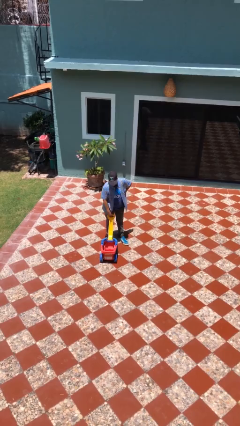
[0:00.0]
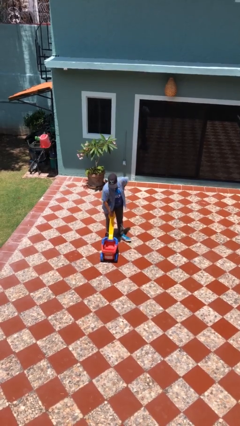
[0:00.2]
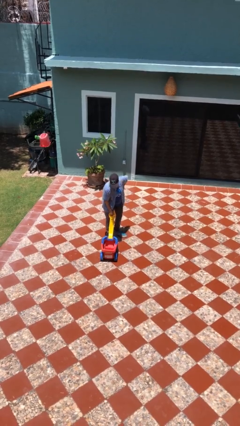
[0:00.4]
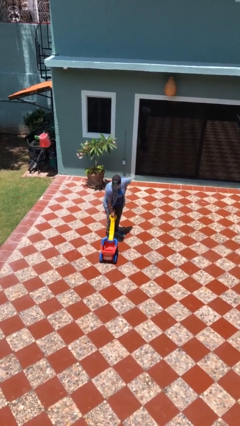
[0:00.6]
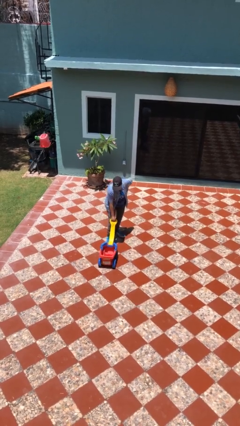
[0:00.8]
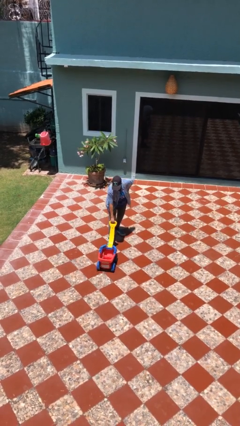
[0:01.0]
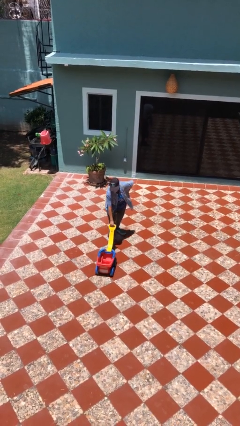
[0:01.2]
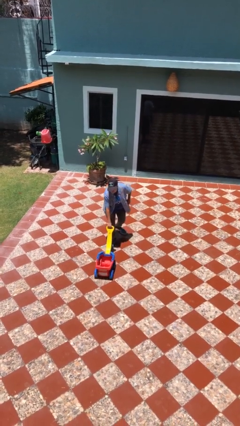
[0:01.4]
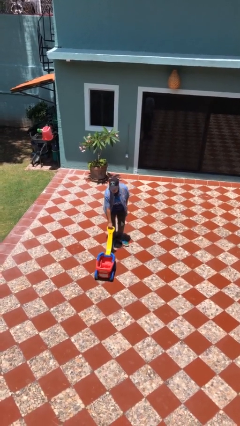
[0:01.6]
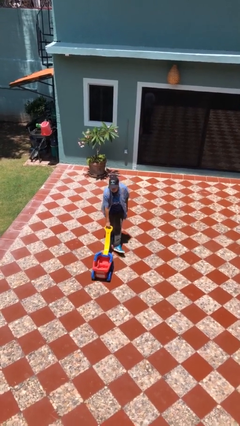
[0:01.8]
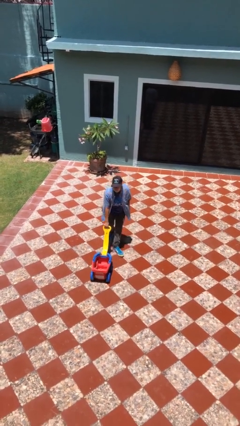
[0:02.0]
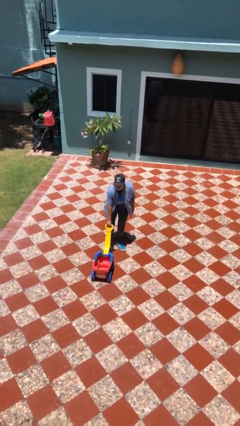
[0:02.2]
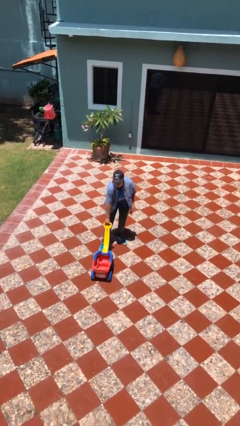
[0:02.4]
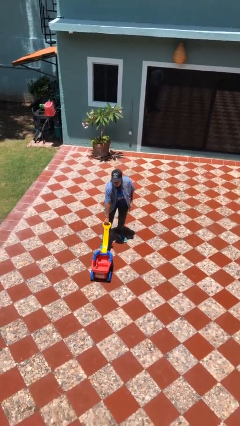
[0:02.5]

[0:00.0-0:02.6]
person pushes wheeled cart

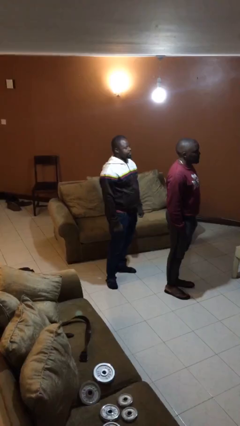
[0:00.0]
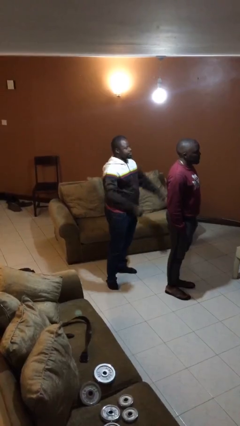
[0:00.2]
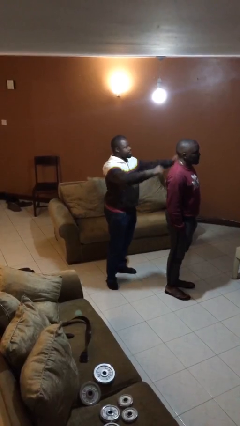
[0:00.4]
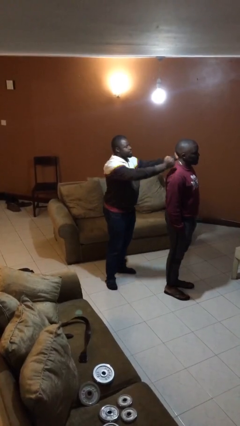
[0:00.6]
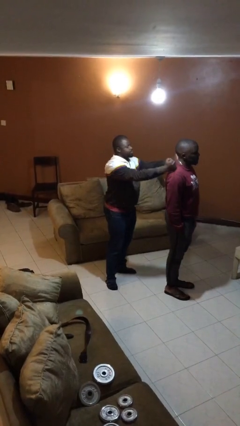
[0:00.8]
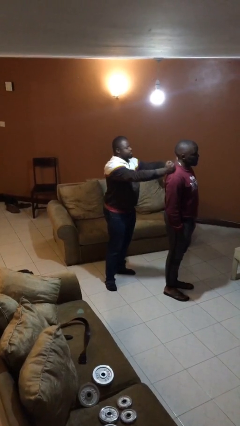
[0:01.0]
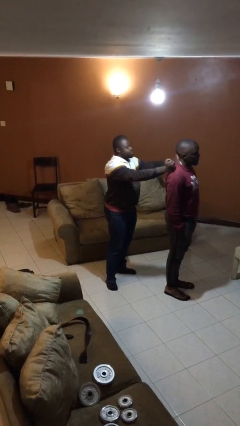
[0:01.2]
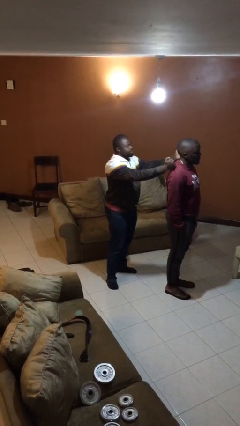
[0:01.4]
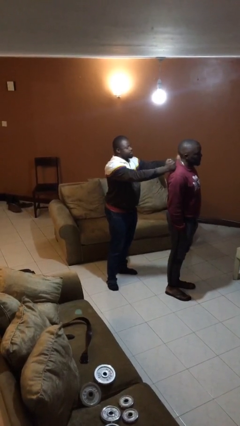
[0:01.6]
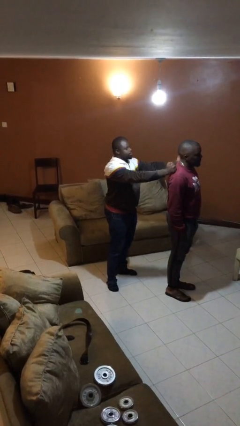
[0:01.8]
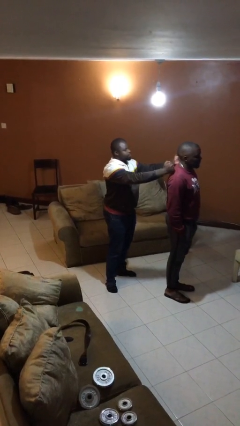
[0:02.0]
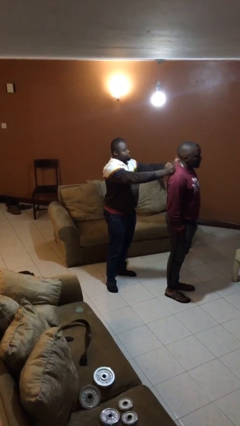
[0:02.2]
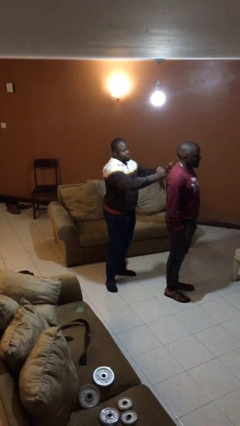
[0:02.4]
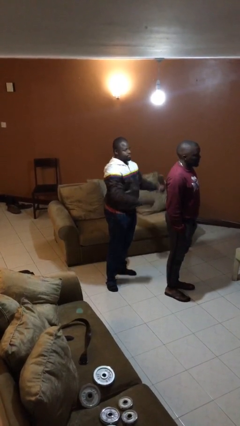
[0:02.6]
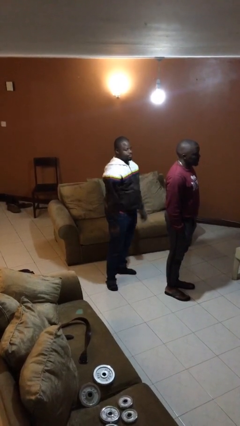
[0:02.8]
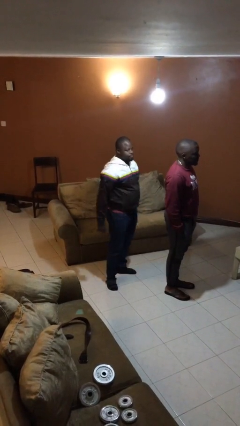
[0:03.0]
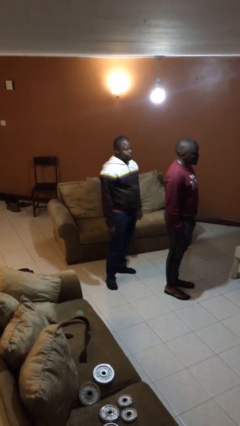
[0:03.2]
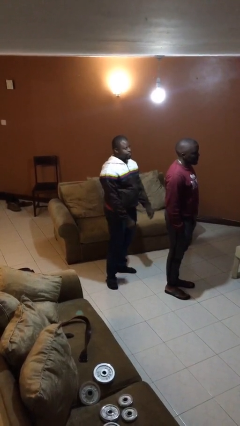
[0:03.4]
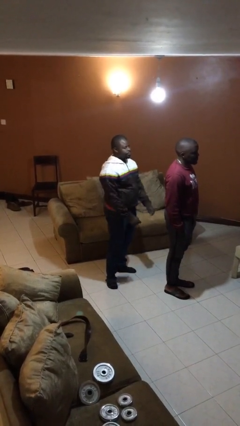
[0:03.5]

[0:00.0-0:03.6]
person pounds shoulders of person

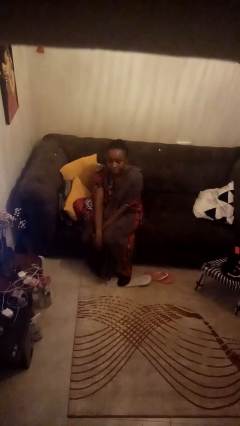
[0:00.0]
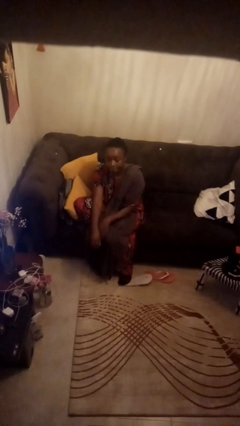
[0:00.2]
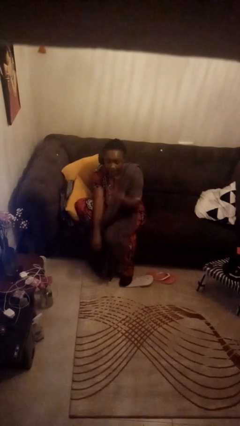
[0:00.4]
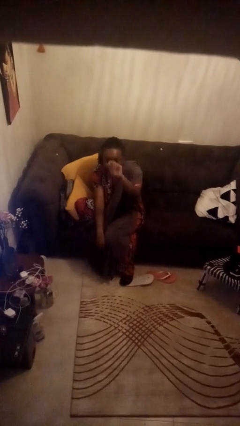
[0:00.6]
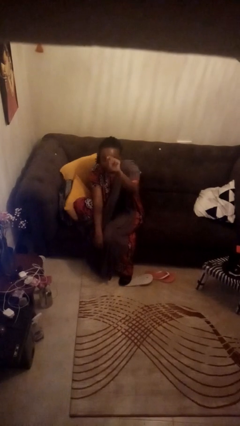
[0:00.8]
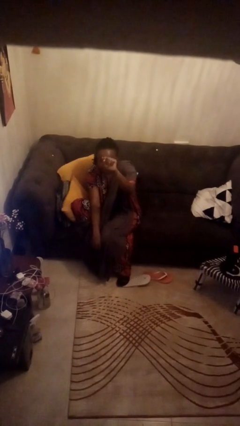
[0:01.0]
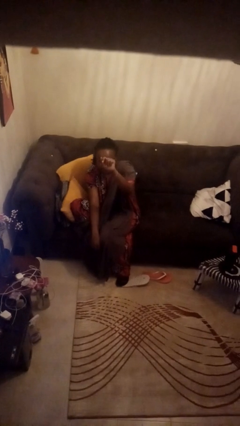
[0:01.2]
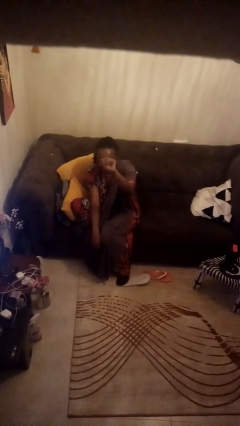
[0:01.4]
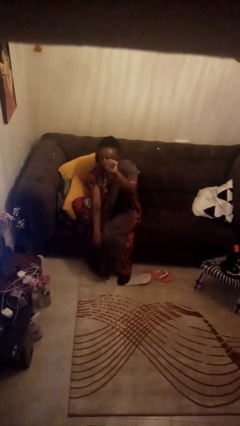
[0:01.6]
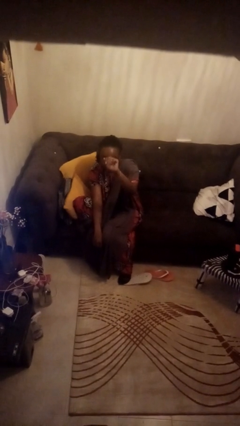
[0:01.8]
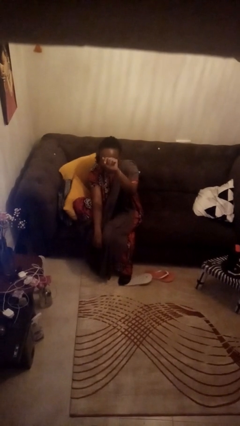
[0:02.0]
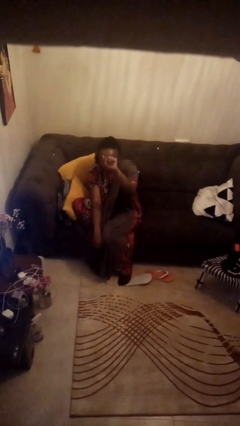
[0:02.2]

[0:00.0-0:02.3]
person gestures come here

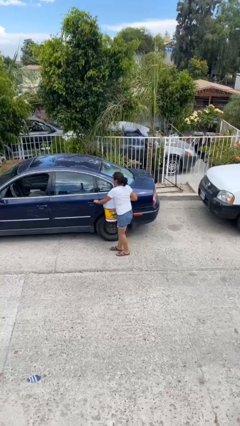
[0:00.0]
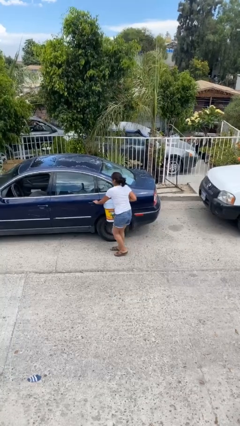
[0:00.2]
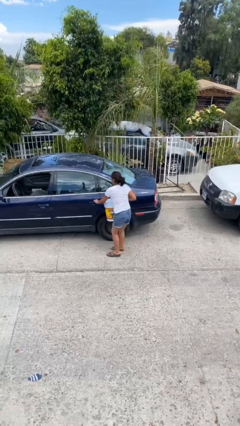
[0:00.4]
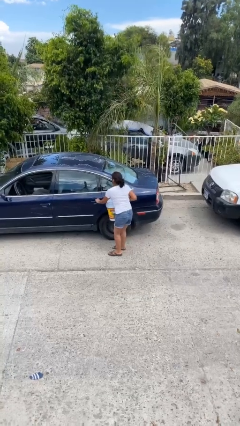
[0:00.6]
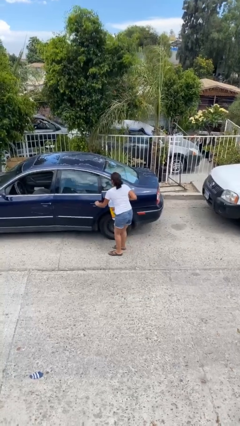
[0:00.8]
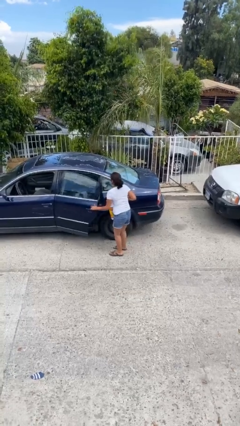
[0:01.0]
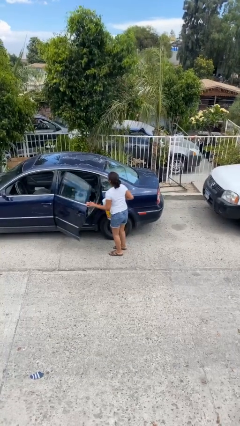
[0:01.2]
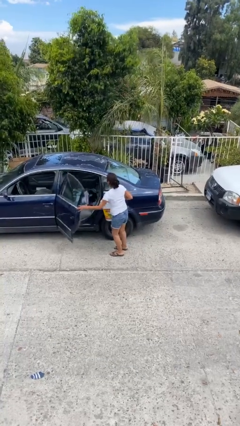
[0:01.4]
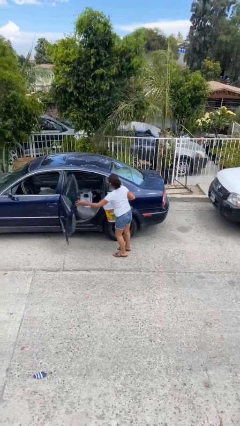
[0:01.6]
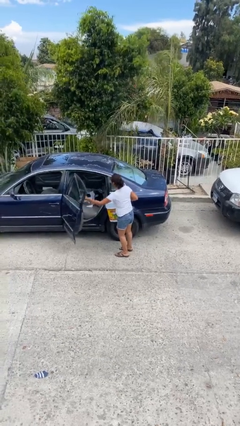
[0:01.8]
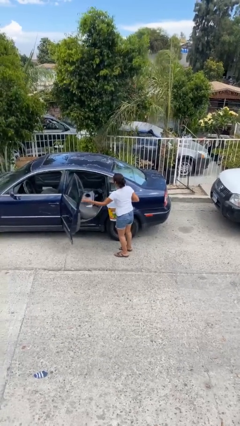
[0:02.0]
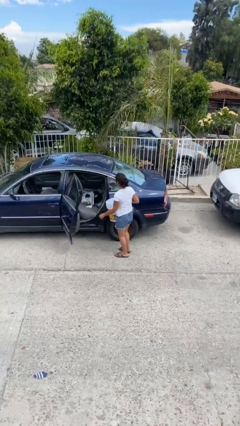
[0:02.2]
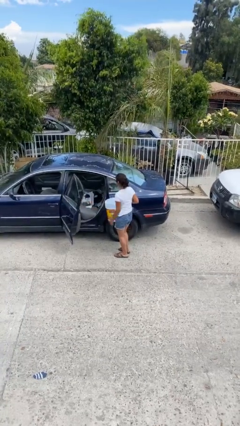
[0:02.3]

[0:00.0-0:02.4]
person opens car door

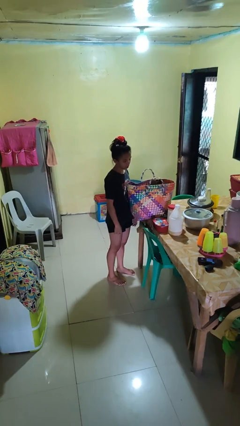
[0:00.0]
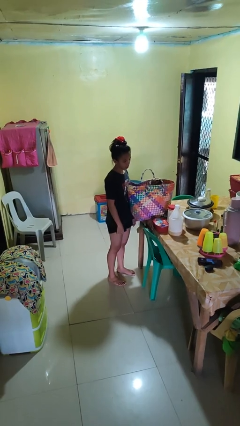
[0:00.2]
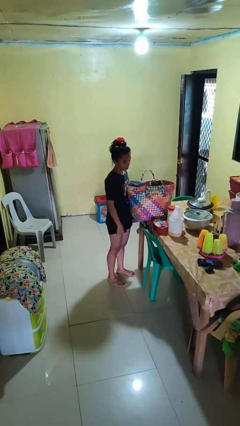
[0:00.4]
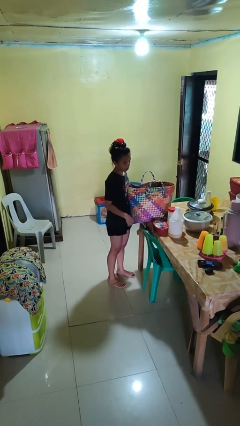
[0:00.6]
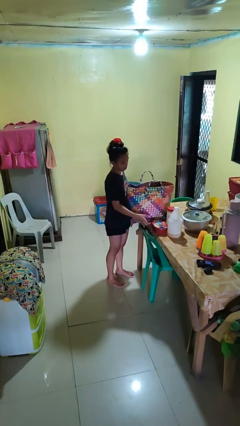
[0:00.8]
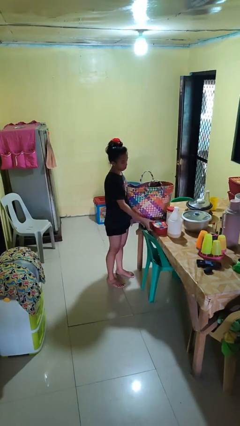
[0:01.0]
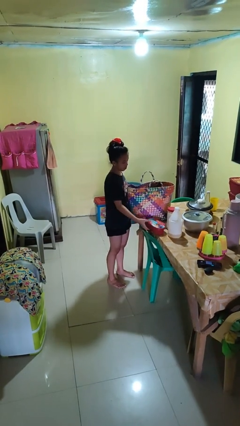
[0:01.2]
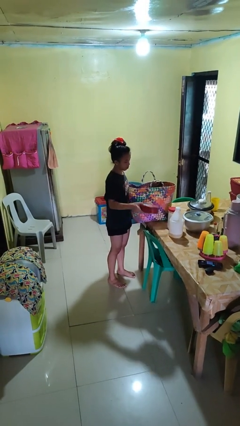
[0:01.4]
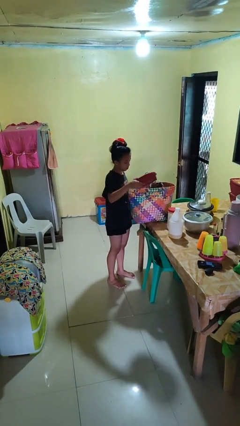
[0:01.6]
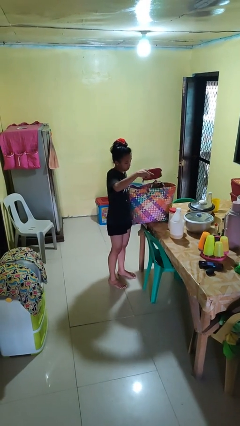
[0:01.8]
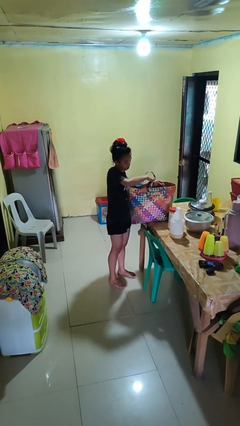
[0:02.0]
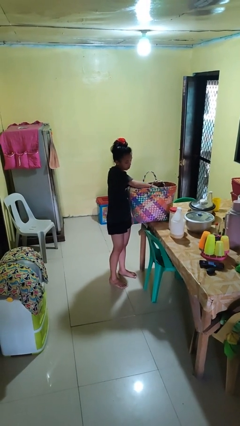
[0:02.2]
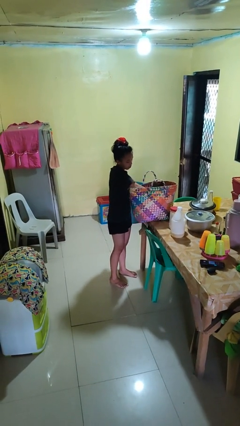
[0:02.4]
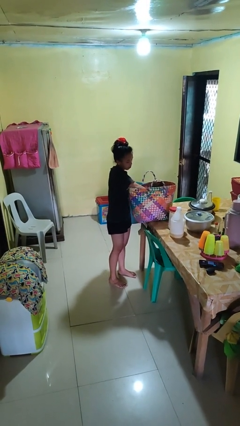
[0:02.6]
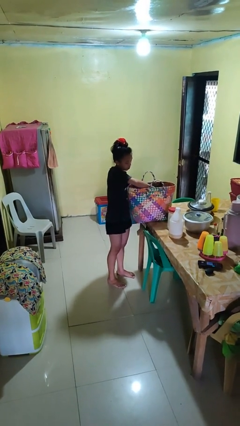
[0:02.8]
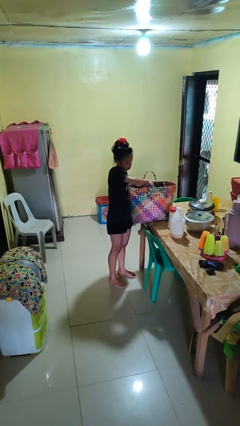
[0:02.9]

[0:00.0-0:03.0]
person puts object into basket

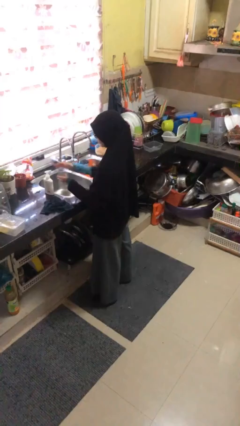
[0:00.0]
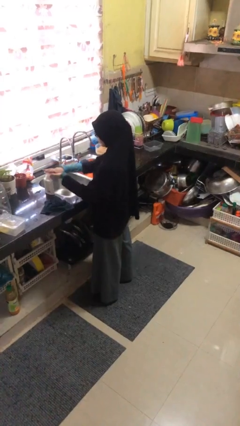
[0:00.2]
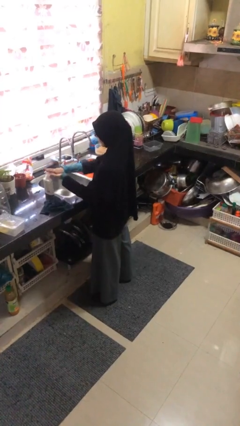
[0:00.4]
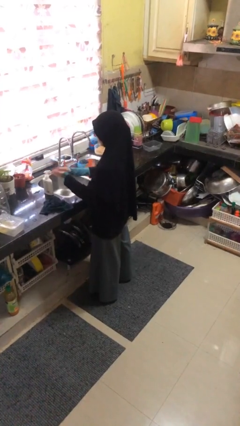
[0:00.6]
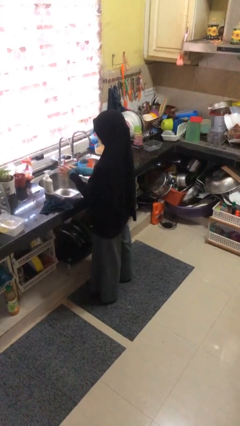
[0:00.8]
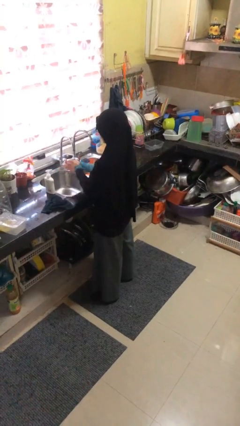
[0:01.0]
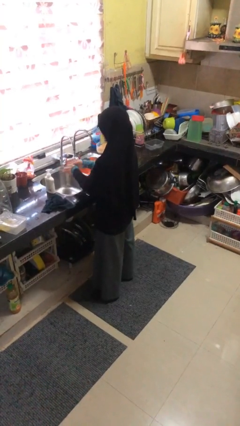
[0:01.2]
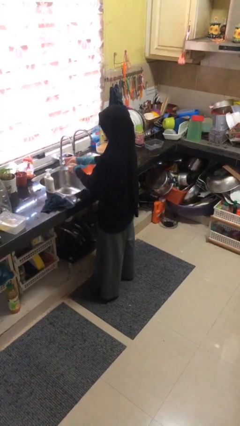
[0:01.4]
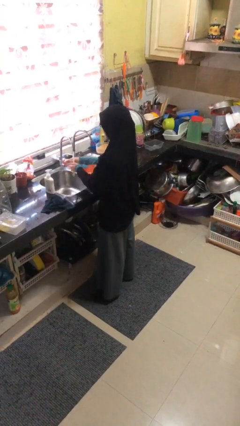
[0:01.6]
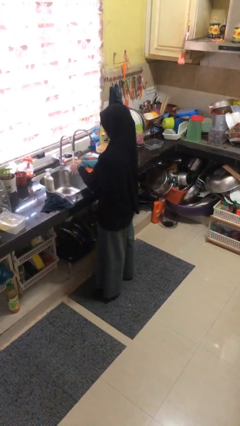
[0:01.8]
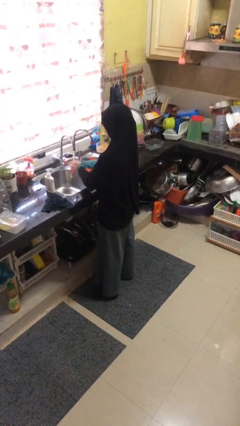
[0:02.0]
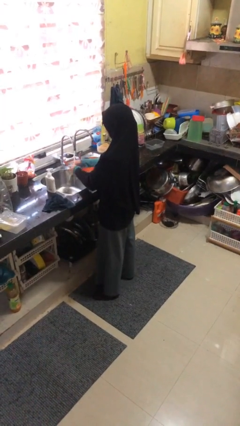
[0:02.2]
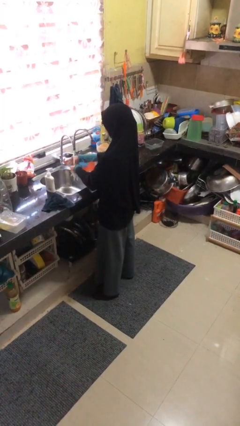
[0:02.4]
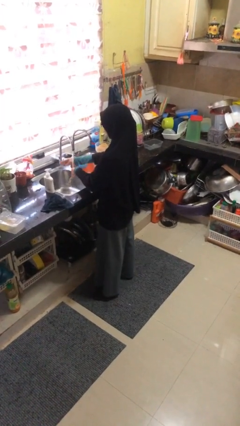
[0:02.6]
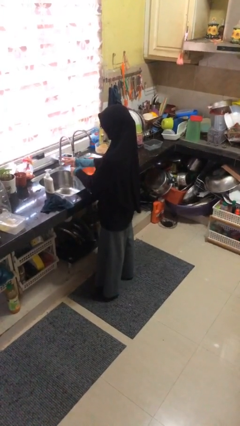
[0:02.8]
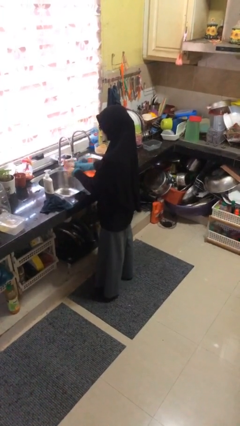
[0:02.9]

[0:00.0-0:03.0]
person washes hands

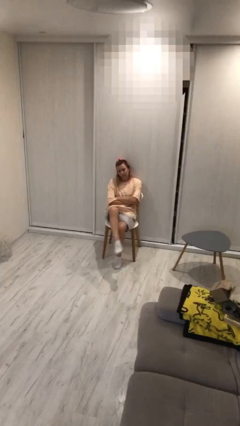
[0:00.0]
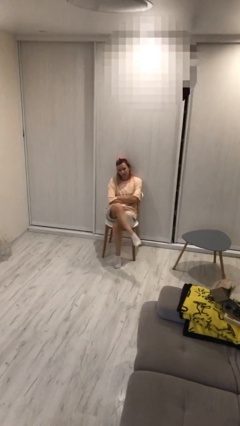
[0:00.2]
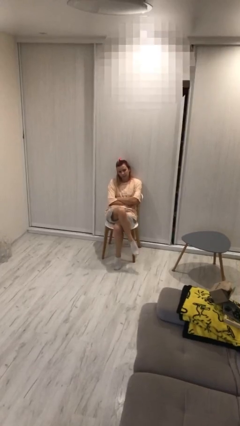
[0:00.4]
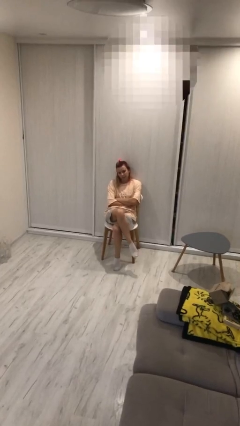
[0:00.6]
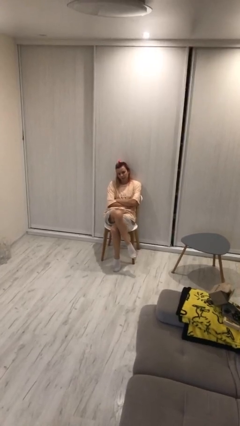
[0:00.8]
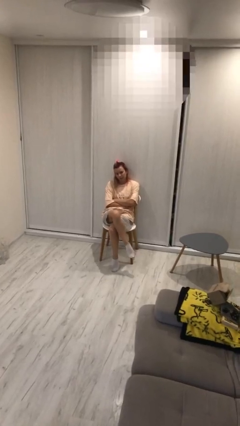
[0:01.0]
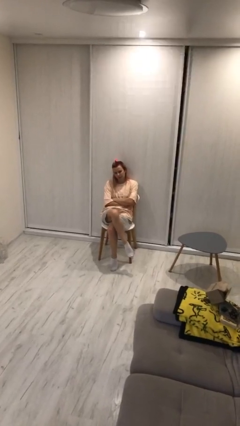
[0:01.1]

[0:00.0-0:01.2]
person crosses legs
